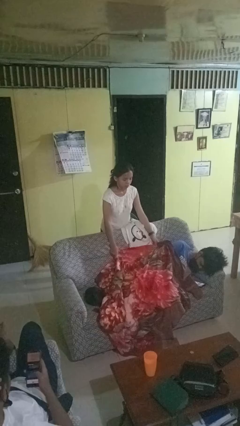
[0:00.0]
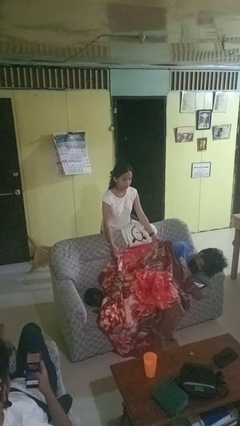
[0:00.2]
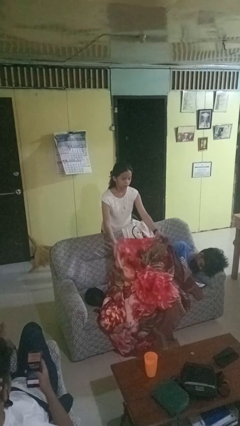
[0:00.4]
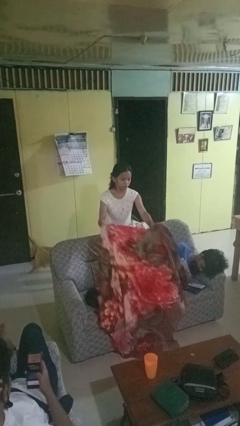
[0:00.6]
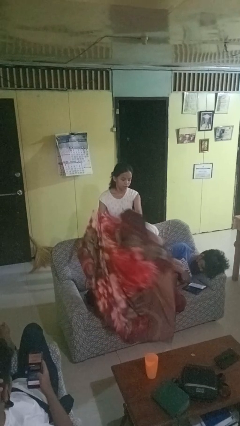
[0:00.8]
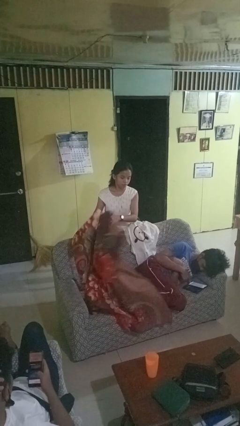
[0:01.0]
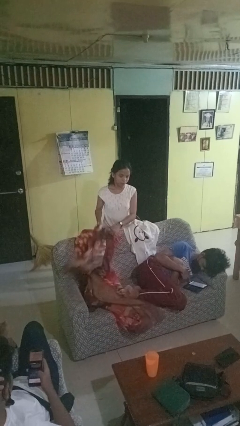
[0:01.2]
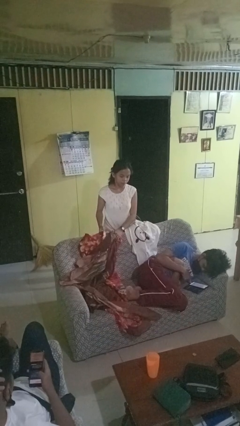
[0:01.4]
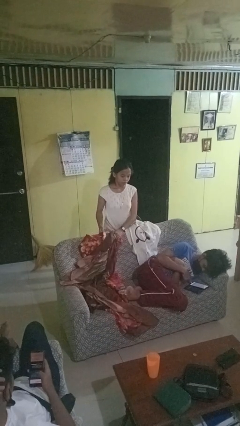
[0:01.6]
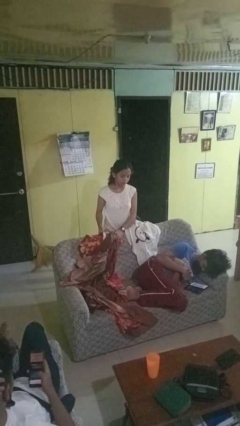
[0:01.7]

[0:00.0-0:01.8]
person uncovers friend with blanket

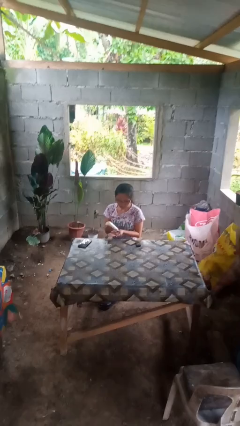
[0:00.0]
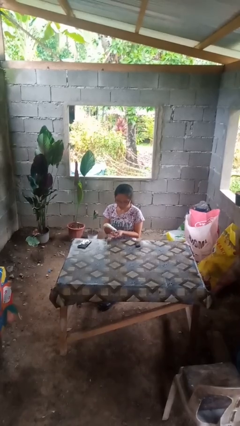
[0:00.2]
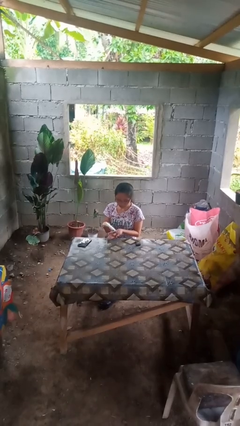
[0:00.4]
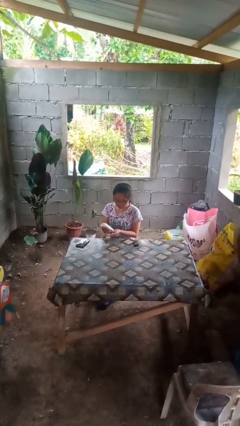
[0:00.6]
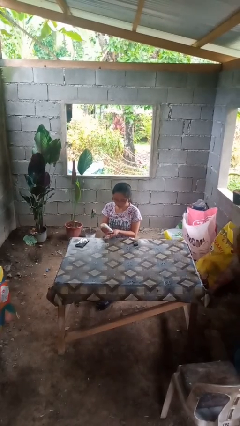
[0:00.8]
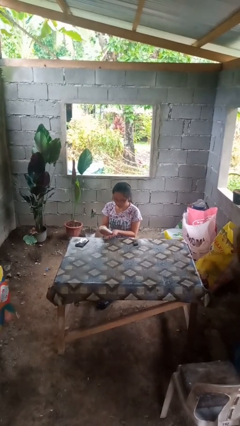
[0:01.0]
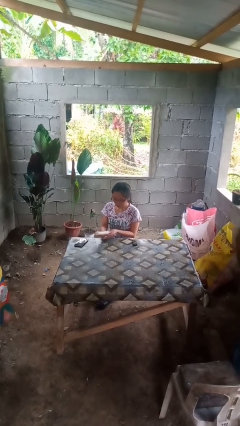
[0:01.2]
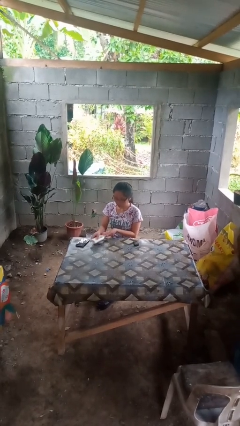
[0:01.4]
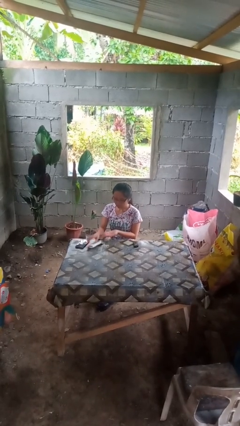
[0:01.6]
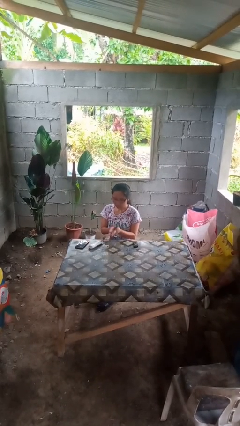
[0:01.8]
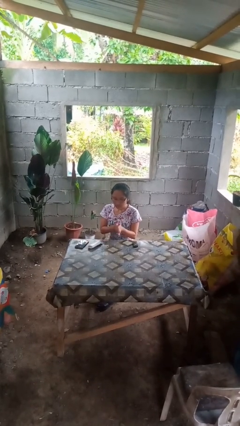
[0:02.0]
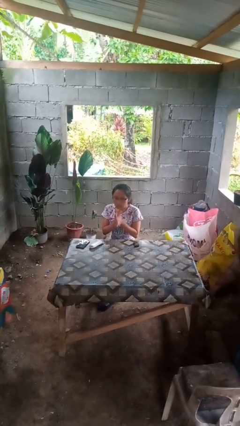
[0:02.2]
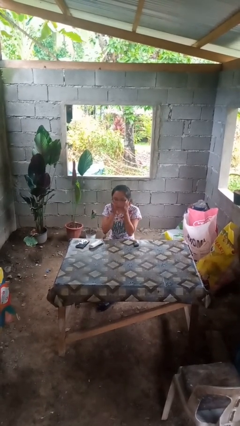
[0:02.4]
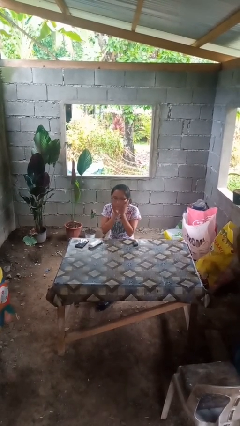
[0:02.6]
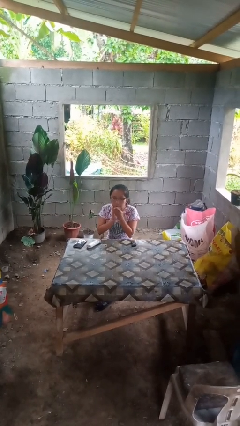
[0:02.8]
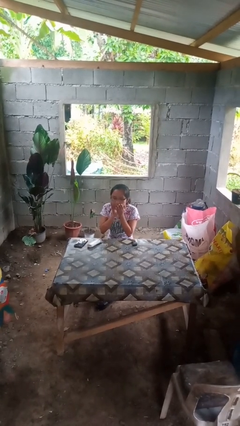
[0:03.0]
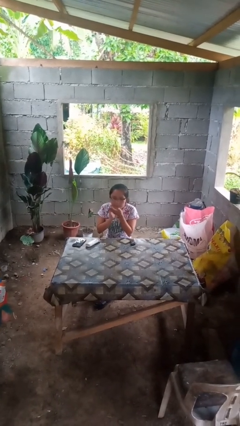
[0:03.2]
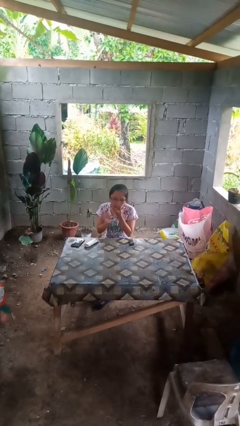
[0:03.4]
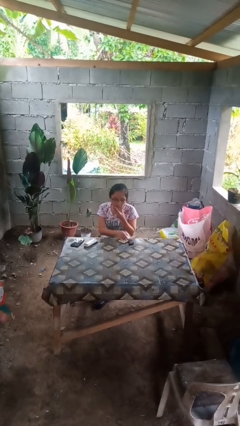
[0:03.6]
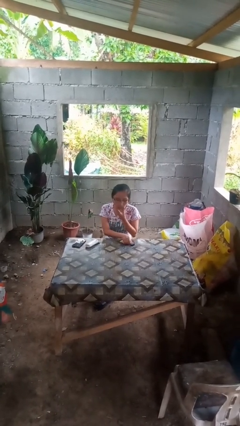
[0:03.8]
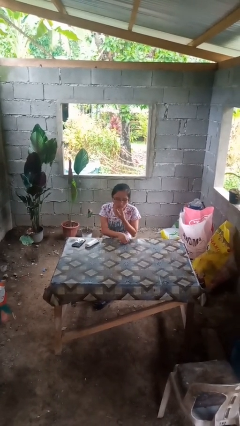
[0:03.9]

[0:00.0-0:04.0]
person applies shaving cream

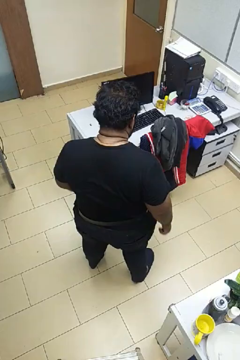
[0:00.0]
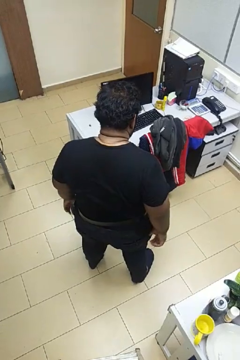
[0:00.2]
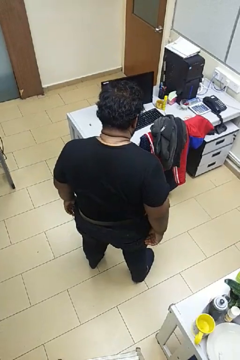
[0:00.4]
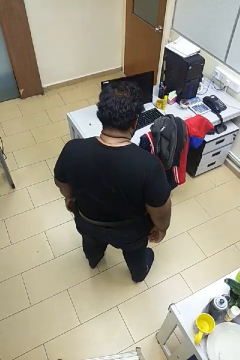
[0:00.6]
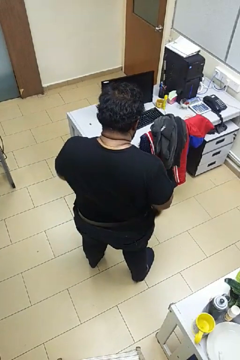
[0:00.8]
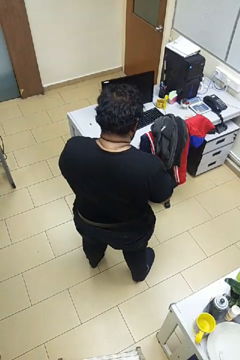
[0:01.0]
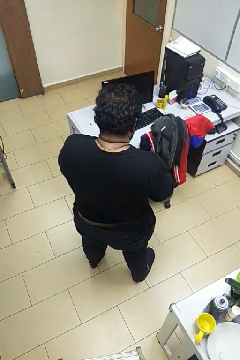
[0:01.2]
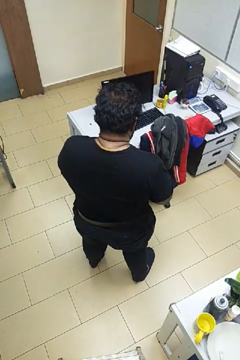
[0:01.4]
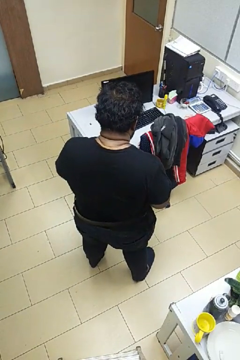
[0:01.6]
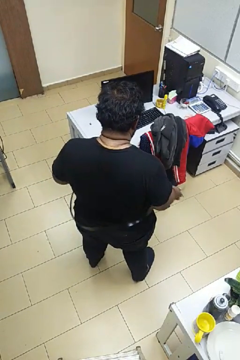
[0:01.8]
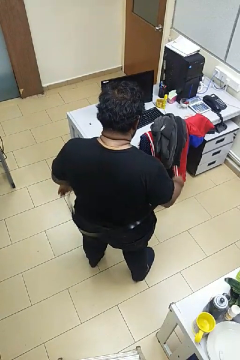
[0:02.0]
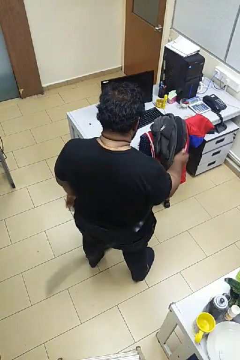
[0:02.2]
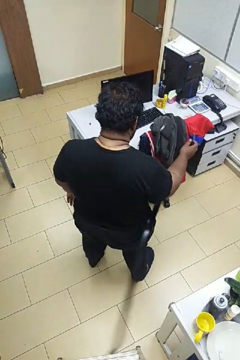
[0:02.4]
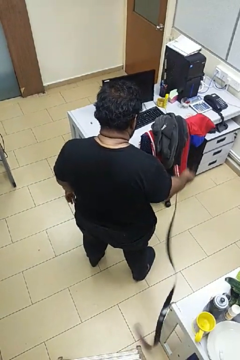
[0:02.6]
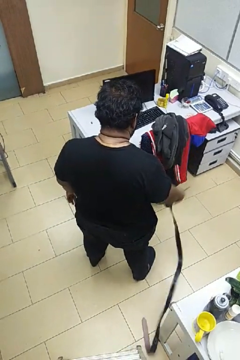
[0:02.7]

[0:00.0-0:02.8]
person takes off belt

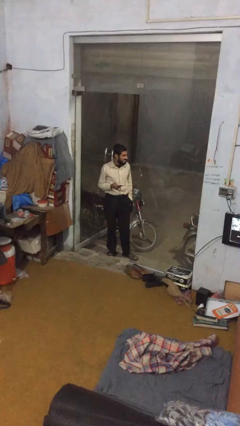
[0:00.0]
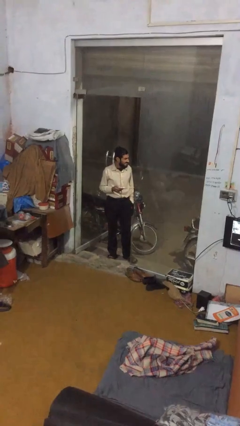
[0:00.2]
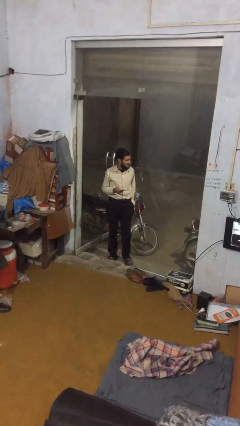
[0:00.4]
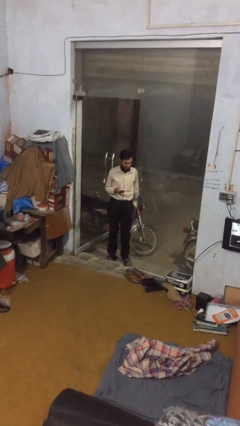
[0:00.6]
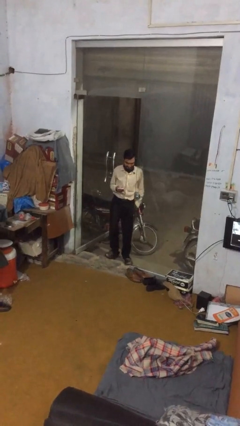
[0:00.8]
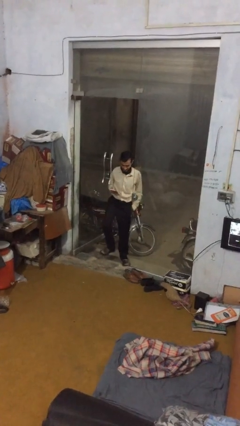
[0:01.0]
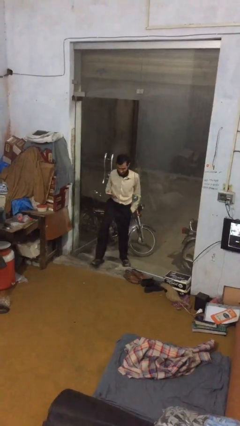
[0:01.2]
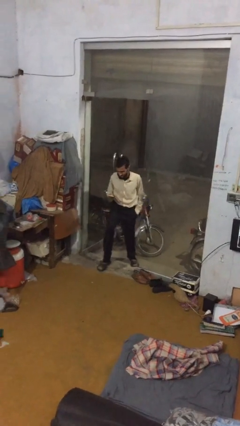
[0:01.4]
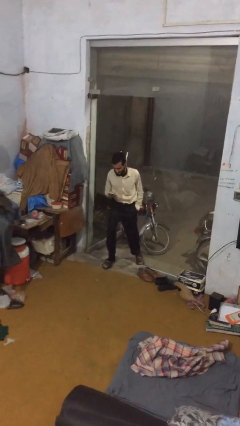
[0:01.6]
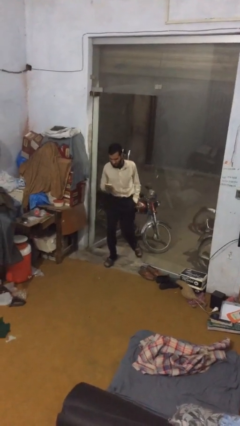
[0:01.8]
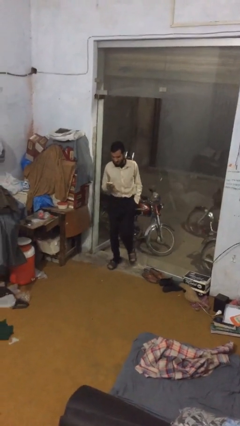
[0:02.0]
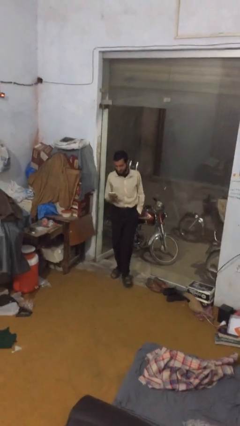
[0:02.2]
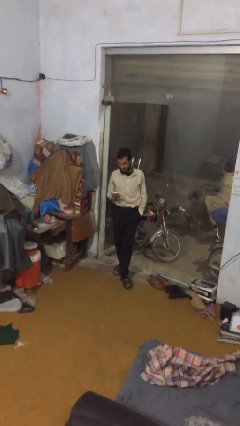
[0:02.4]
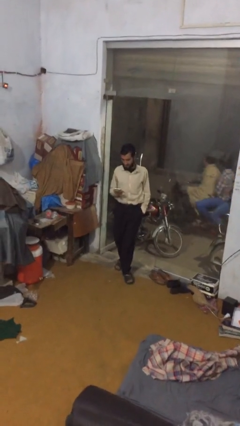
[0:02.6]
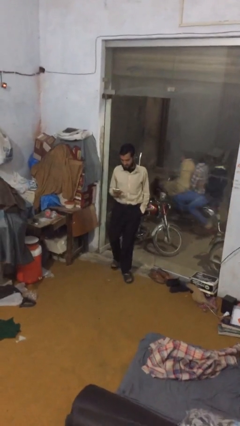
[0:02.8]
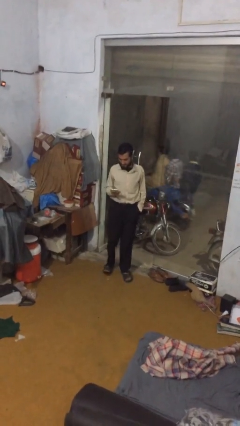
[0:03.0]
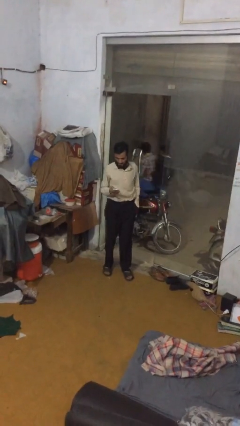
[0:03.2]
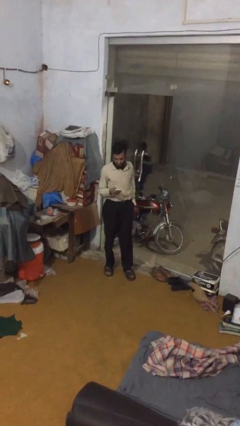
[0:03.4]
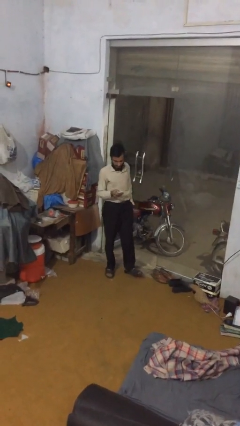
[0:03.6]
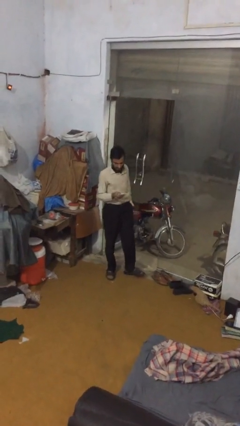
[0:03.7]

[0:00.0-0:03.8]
person enters scene through structure

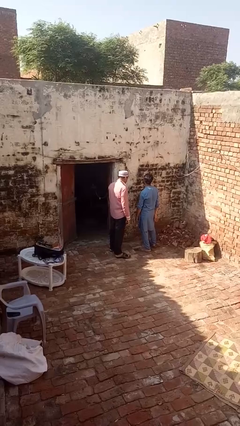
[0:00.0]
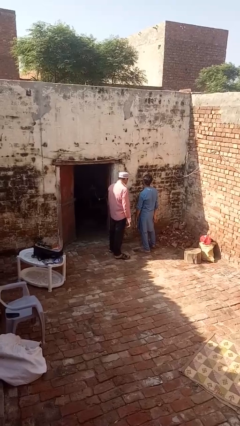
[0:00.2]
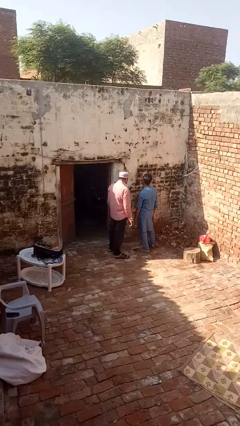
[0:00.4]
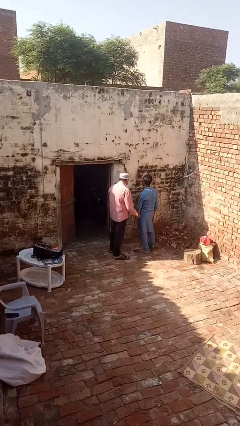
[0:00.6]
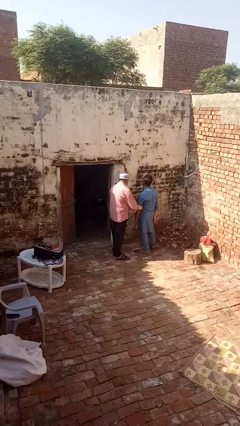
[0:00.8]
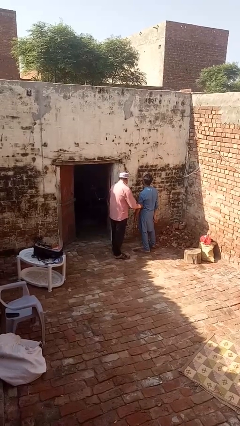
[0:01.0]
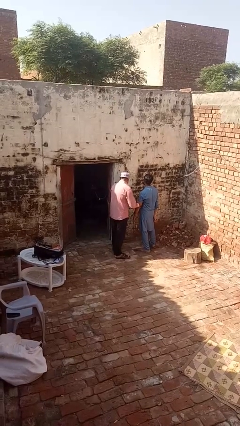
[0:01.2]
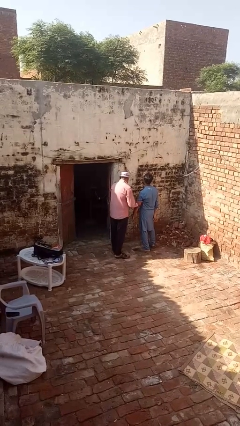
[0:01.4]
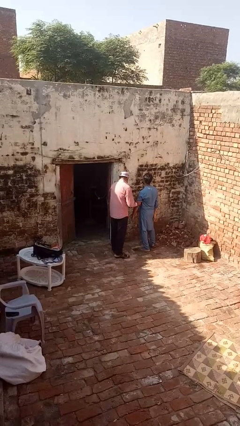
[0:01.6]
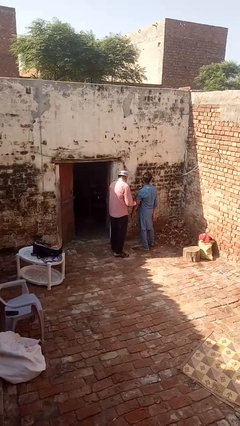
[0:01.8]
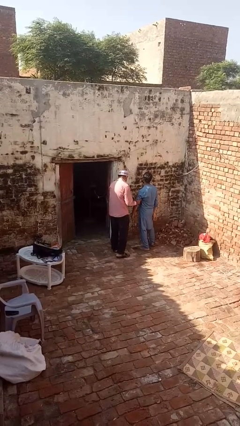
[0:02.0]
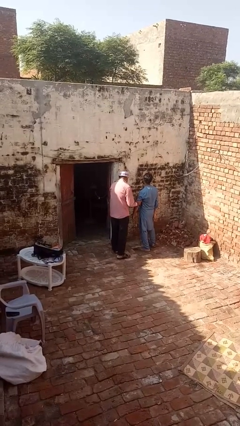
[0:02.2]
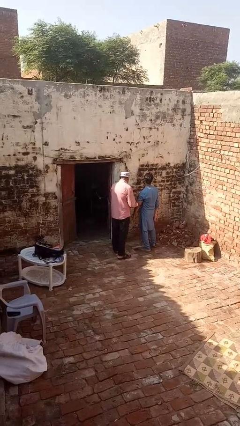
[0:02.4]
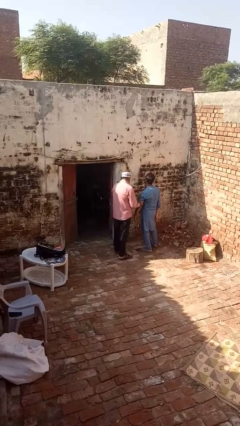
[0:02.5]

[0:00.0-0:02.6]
person grabs person by bicep

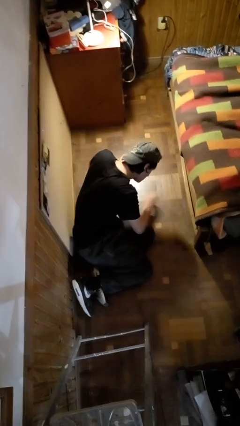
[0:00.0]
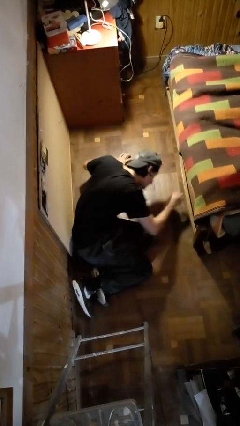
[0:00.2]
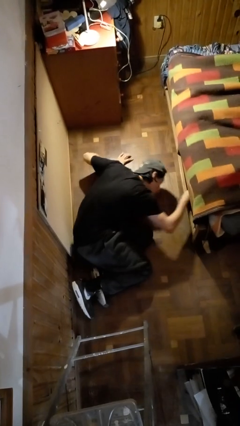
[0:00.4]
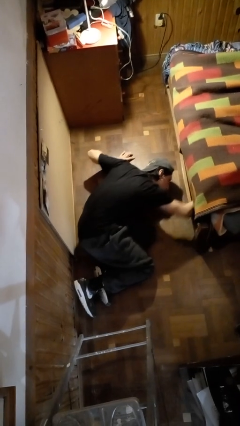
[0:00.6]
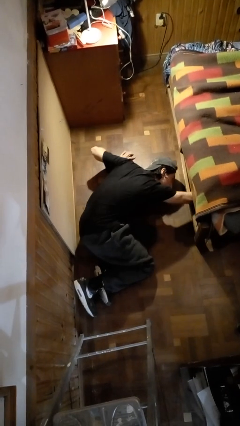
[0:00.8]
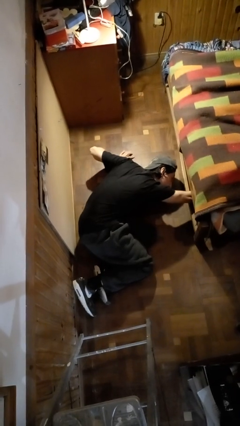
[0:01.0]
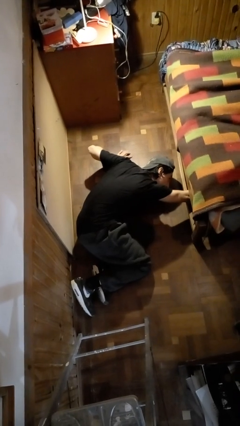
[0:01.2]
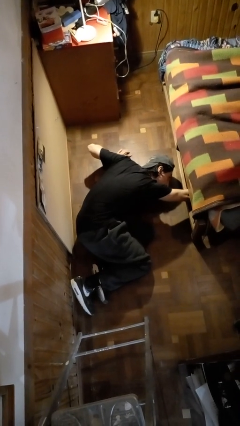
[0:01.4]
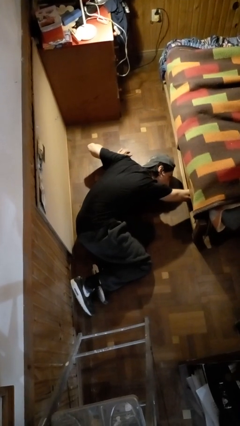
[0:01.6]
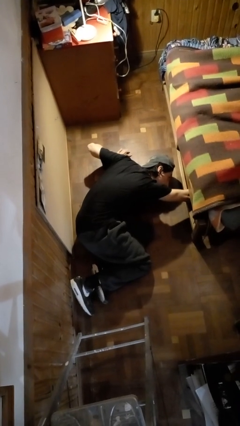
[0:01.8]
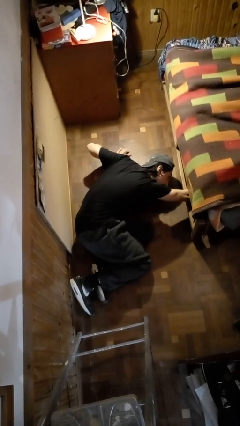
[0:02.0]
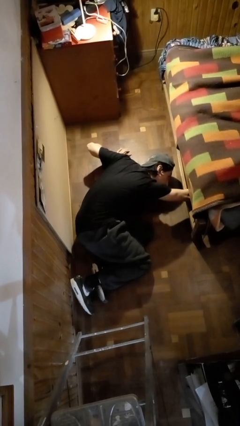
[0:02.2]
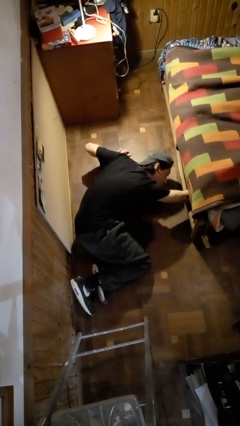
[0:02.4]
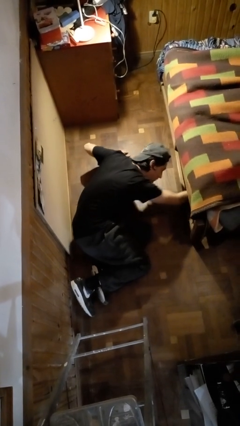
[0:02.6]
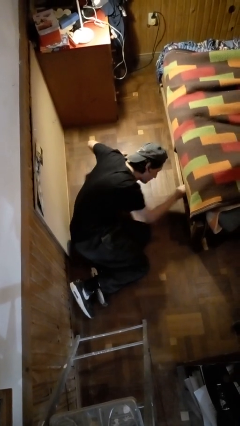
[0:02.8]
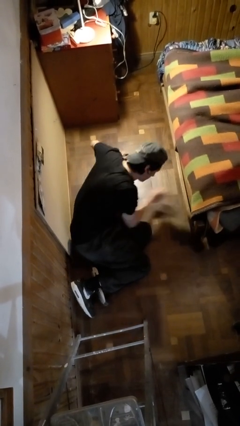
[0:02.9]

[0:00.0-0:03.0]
person searches under bed
